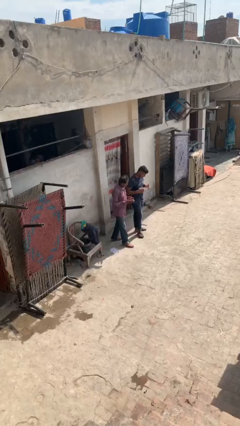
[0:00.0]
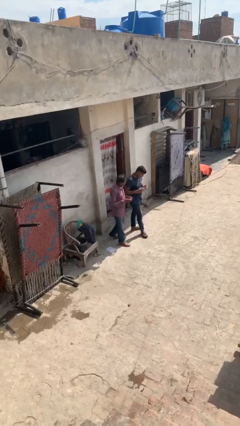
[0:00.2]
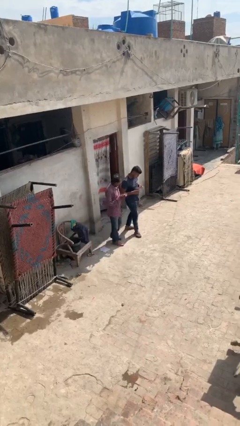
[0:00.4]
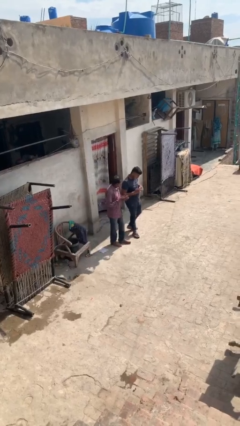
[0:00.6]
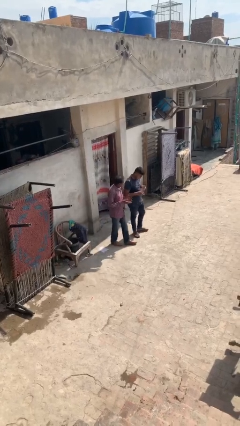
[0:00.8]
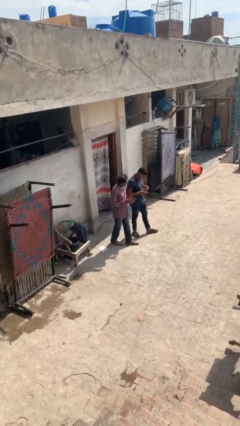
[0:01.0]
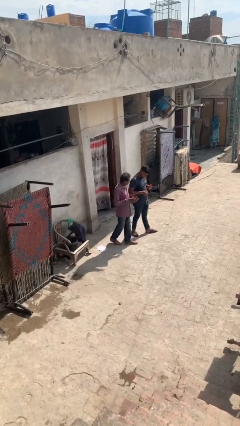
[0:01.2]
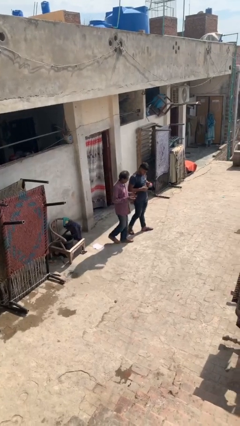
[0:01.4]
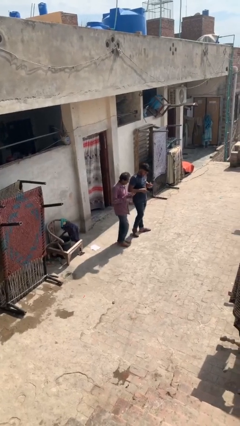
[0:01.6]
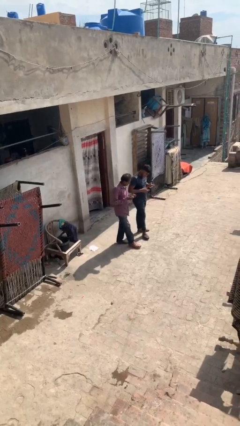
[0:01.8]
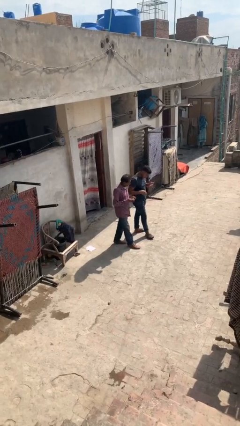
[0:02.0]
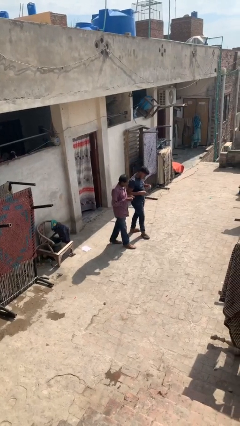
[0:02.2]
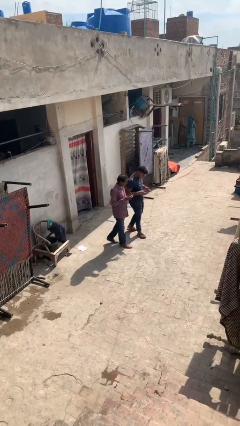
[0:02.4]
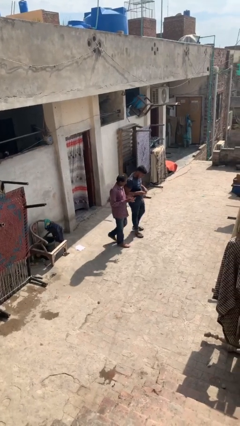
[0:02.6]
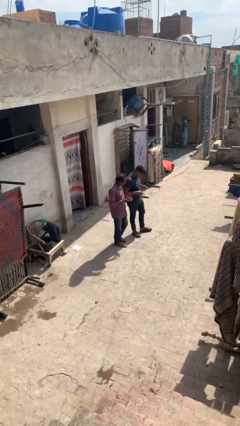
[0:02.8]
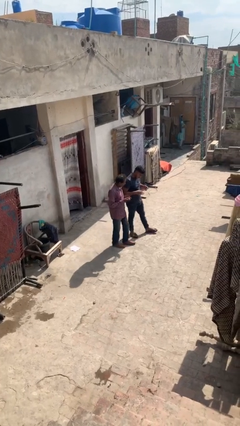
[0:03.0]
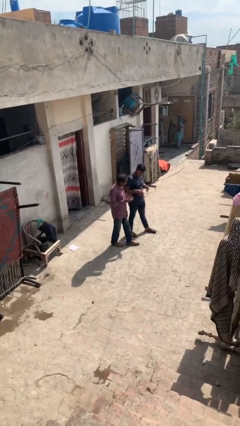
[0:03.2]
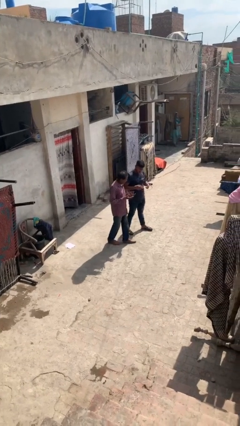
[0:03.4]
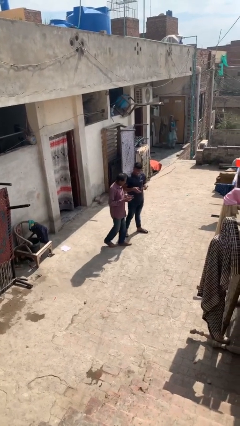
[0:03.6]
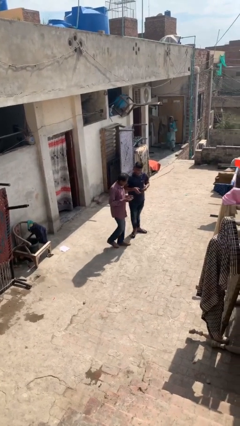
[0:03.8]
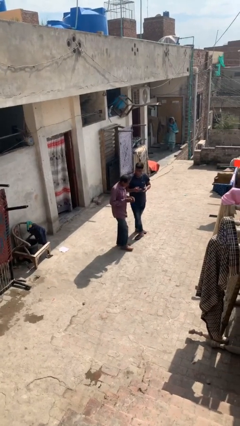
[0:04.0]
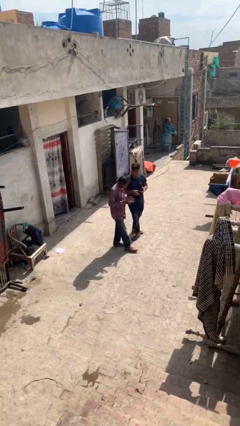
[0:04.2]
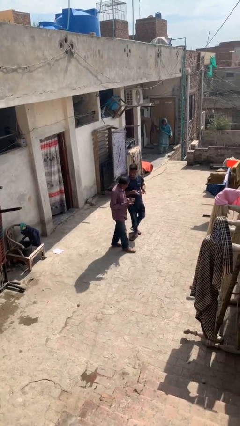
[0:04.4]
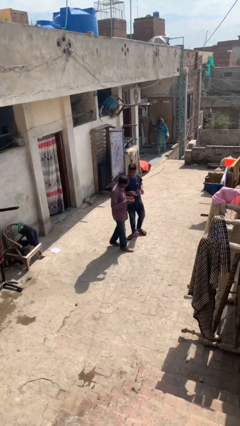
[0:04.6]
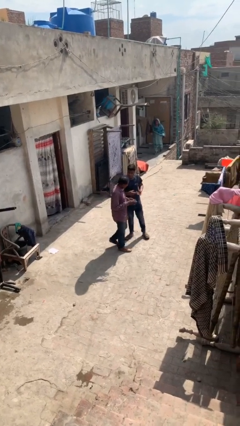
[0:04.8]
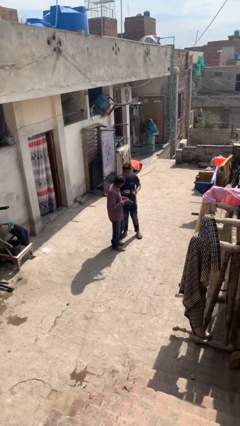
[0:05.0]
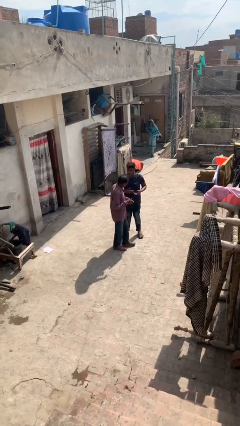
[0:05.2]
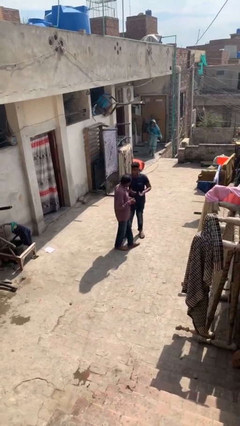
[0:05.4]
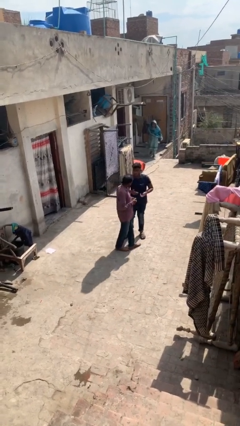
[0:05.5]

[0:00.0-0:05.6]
person talks to person

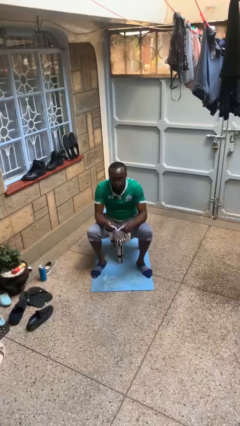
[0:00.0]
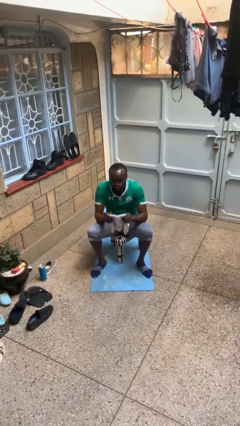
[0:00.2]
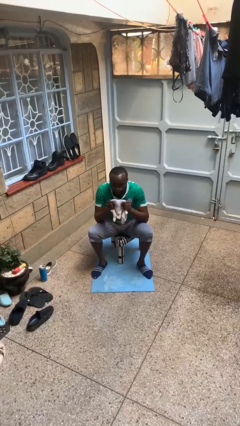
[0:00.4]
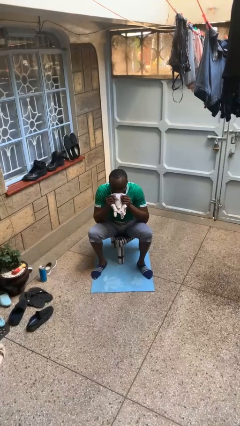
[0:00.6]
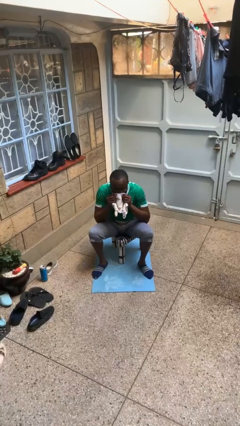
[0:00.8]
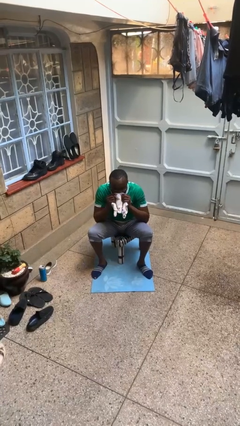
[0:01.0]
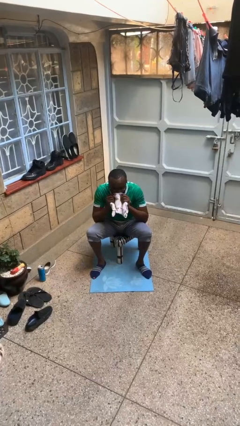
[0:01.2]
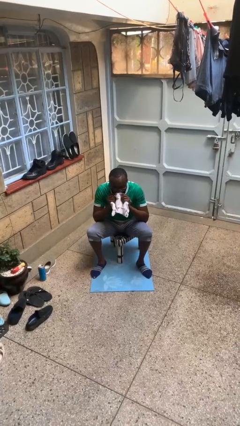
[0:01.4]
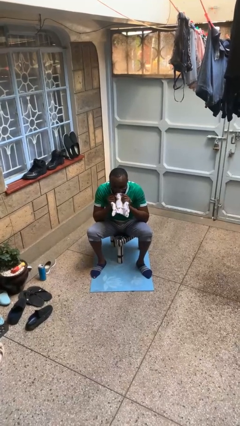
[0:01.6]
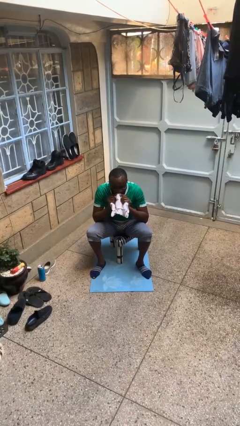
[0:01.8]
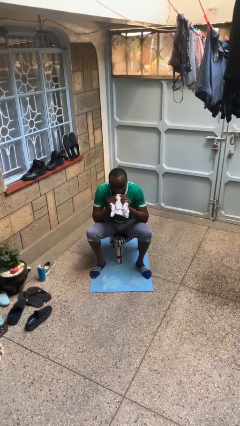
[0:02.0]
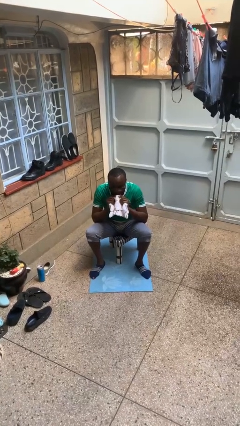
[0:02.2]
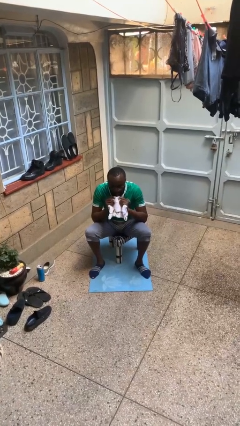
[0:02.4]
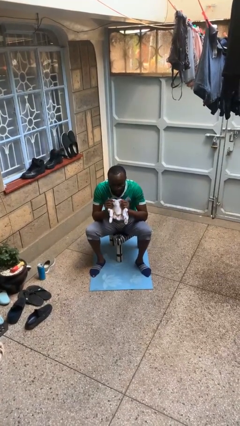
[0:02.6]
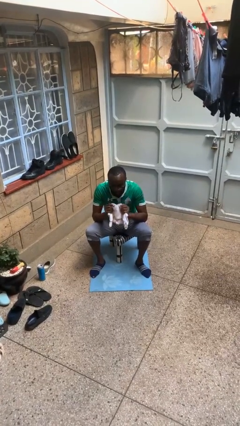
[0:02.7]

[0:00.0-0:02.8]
person wipes mouth with napkin

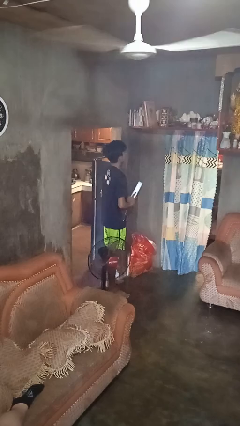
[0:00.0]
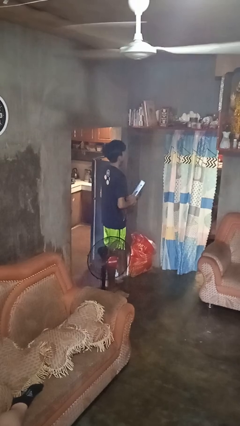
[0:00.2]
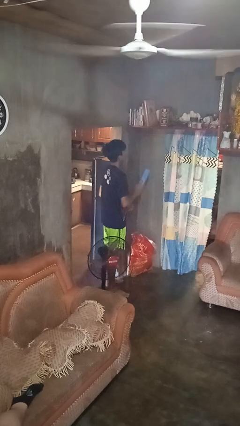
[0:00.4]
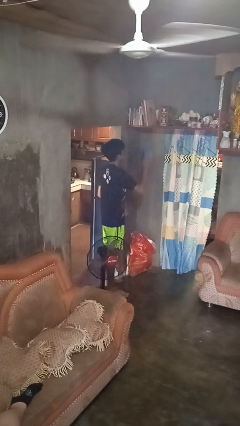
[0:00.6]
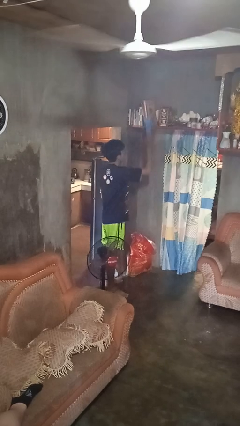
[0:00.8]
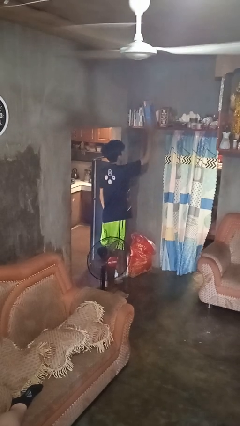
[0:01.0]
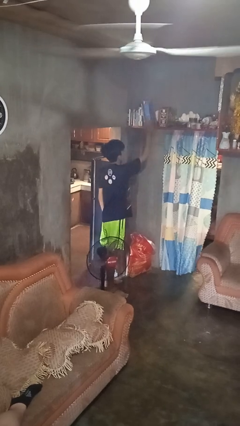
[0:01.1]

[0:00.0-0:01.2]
person puts down object on shelf

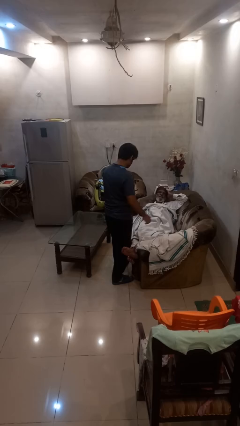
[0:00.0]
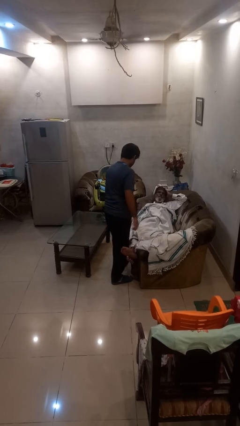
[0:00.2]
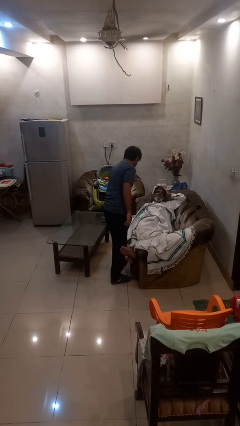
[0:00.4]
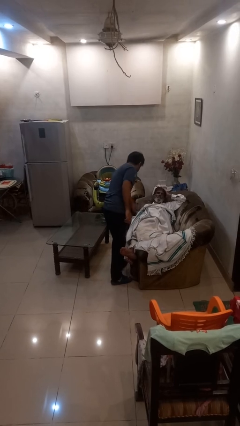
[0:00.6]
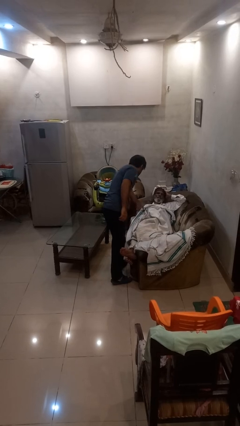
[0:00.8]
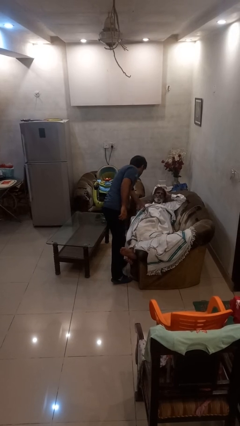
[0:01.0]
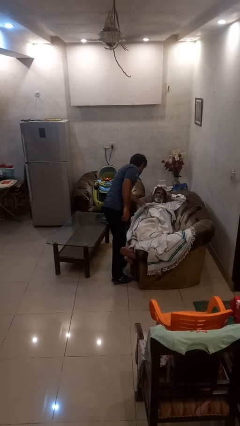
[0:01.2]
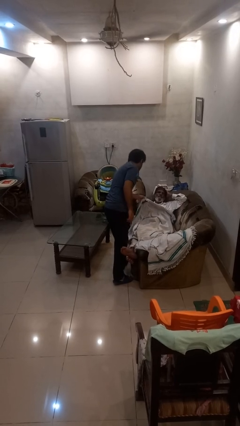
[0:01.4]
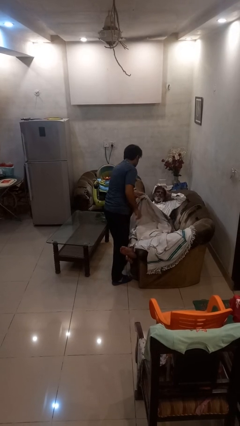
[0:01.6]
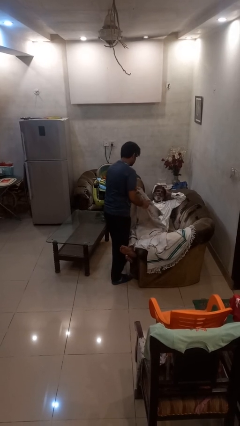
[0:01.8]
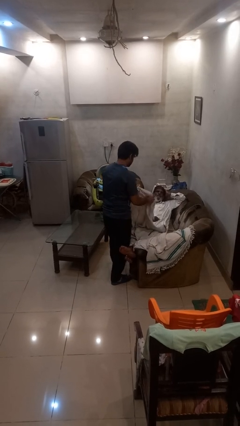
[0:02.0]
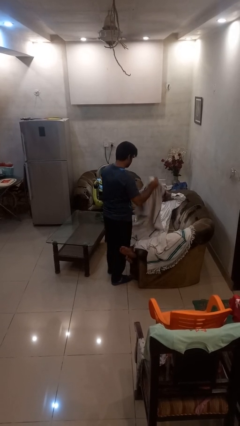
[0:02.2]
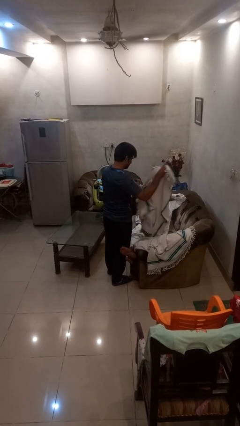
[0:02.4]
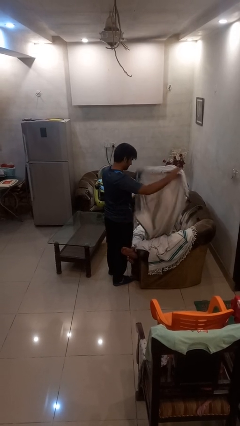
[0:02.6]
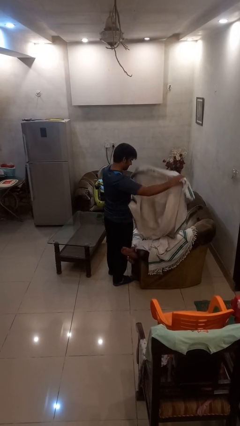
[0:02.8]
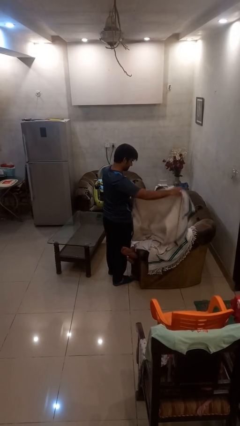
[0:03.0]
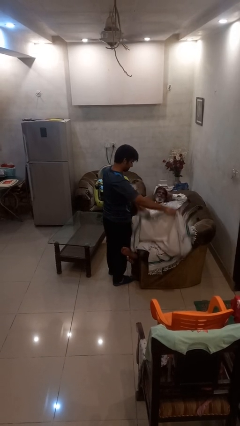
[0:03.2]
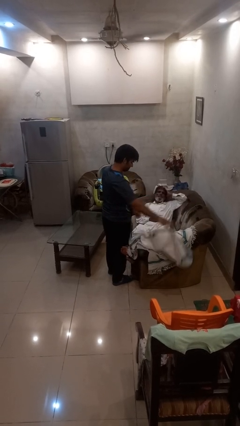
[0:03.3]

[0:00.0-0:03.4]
person uncovers friend with blanket

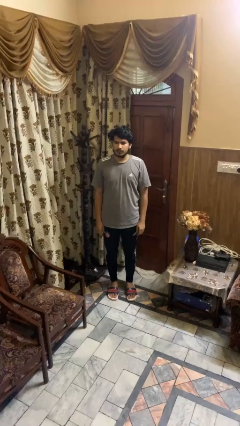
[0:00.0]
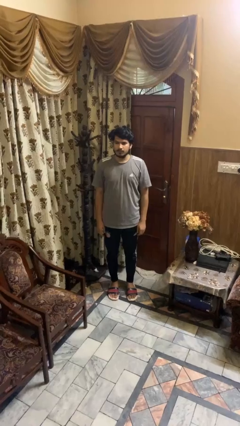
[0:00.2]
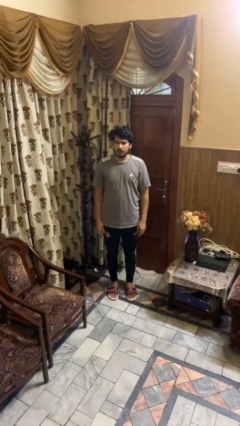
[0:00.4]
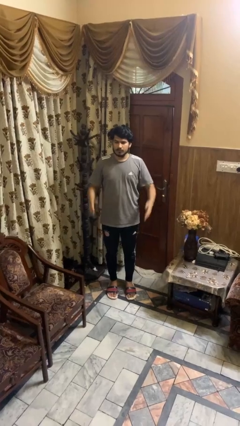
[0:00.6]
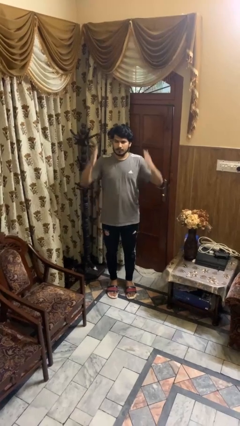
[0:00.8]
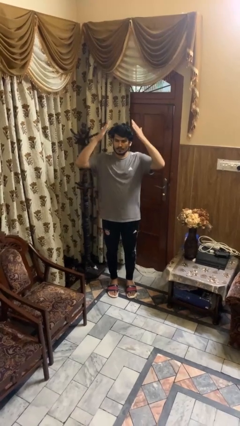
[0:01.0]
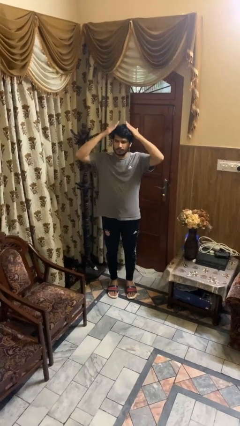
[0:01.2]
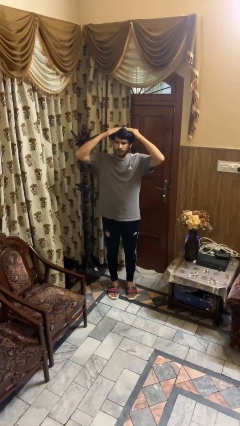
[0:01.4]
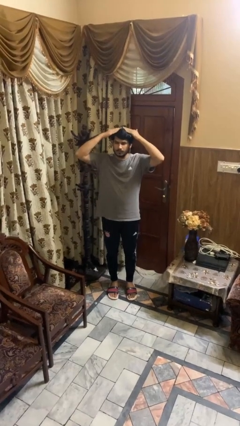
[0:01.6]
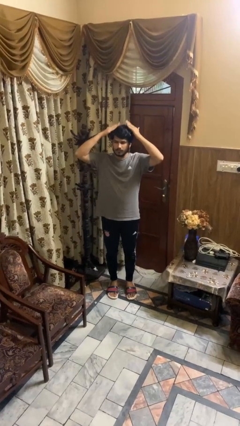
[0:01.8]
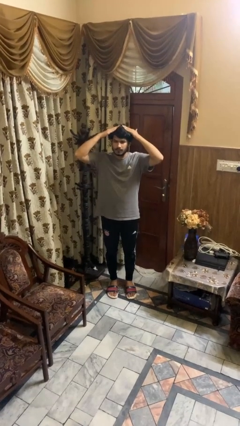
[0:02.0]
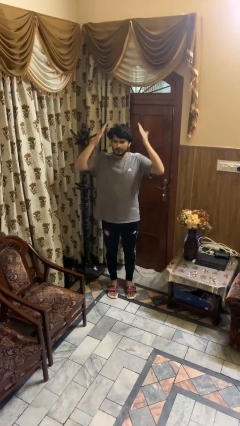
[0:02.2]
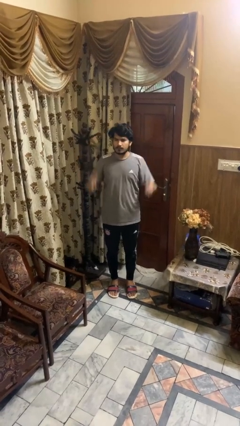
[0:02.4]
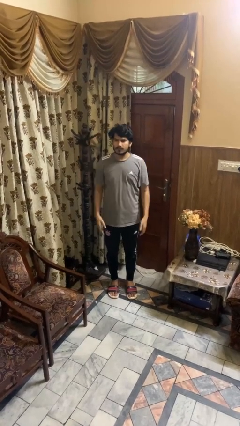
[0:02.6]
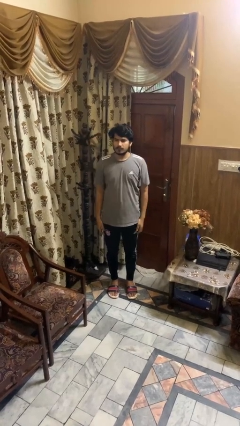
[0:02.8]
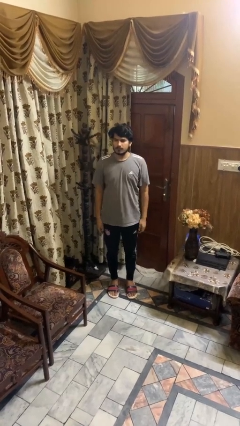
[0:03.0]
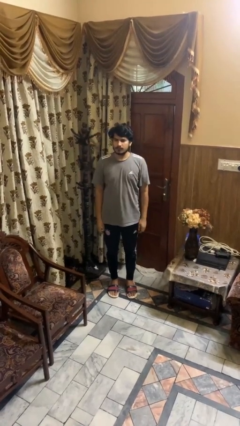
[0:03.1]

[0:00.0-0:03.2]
person pats head

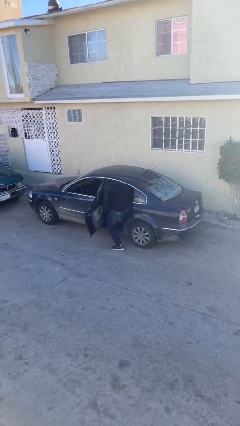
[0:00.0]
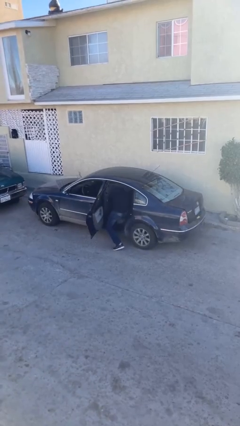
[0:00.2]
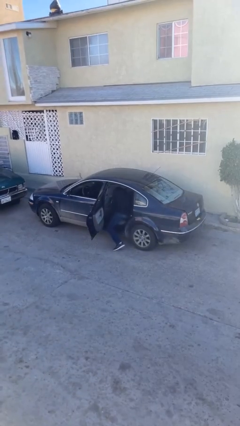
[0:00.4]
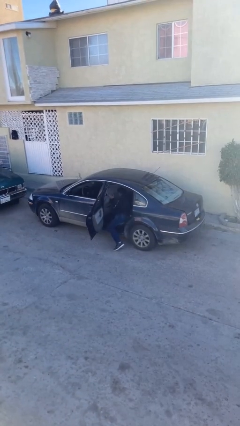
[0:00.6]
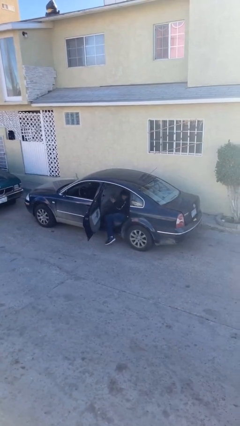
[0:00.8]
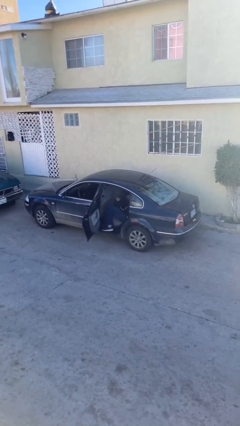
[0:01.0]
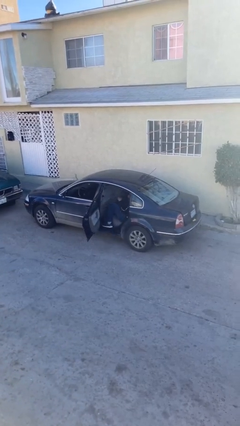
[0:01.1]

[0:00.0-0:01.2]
person enters car

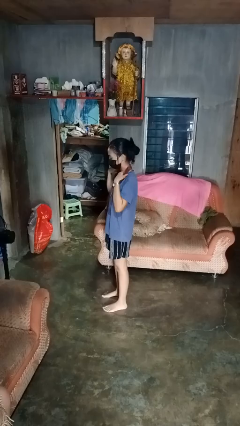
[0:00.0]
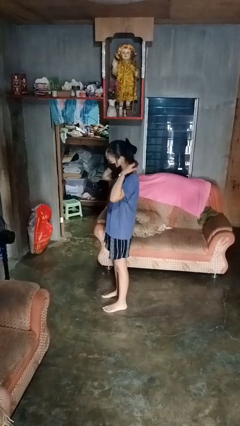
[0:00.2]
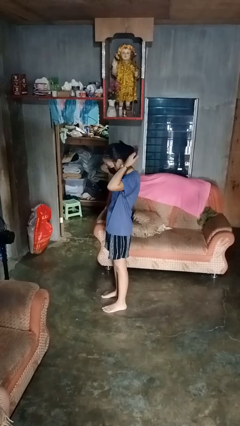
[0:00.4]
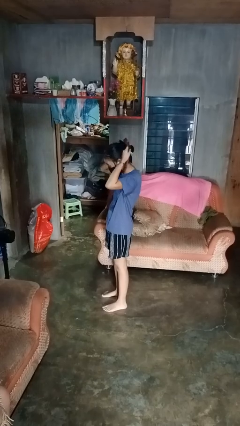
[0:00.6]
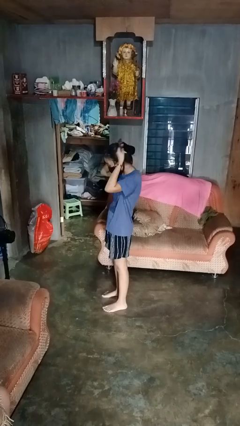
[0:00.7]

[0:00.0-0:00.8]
person takes off necklace
